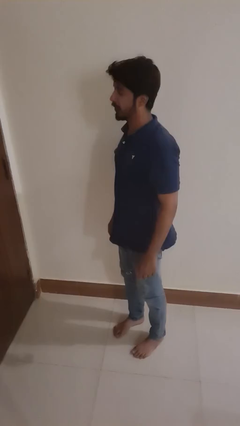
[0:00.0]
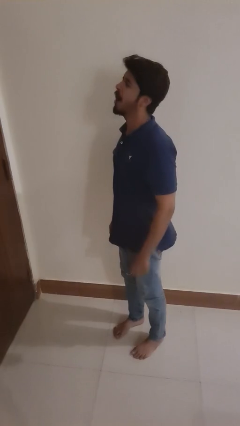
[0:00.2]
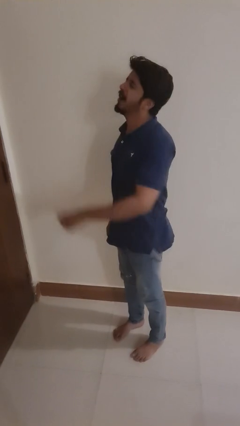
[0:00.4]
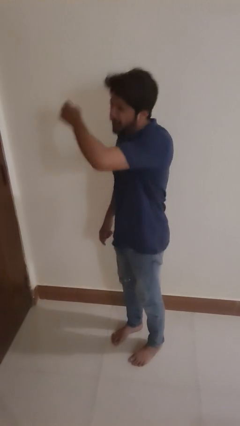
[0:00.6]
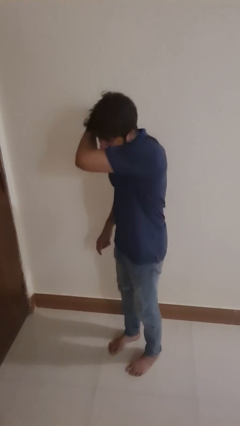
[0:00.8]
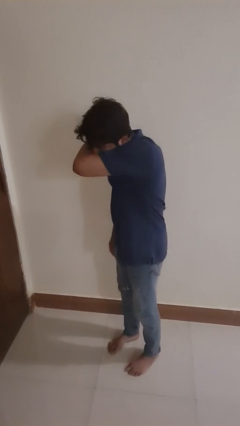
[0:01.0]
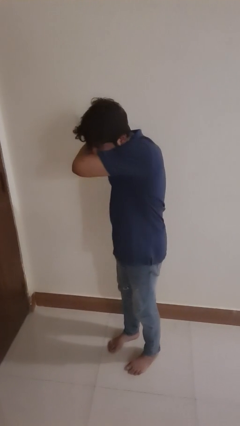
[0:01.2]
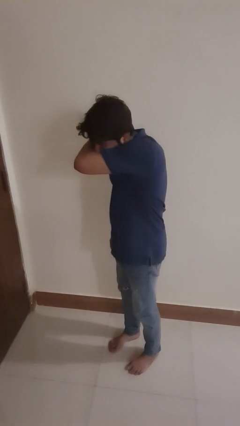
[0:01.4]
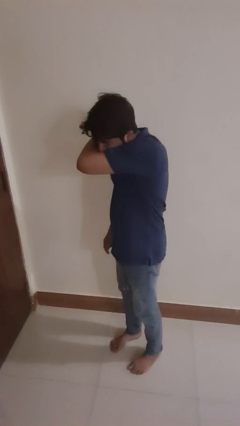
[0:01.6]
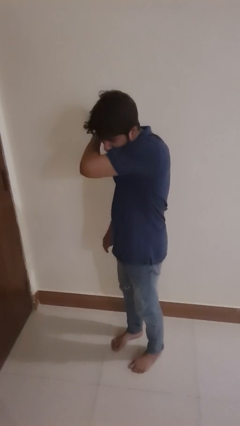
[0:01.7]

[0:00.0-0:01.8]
person sneezes into arm

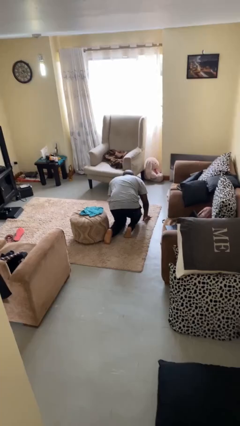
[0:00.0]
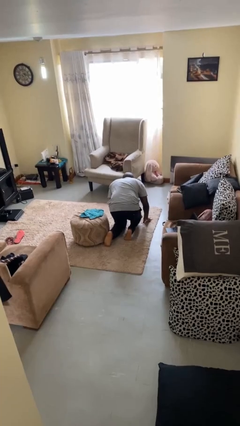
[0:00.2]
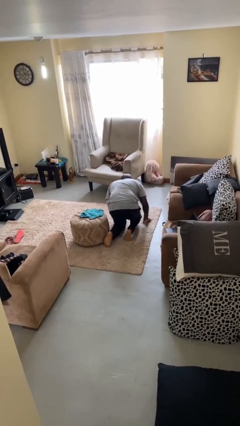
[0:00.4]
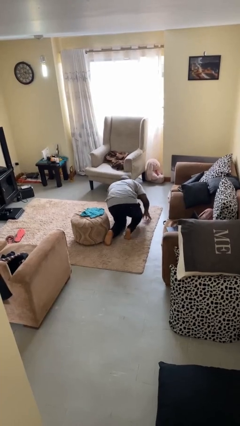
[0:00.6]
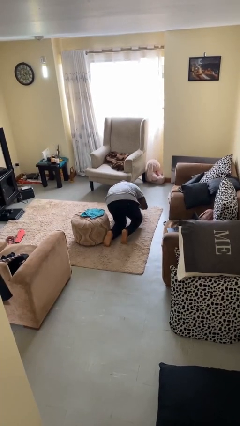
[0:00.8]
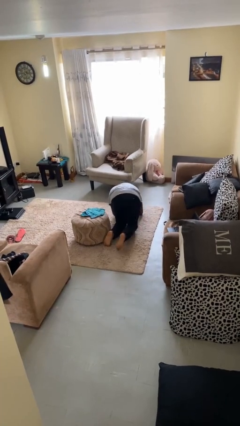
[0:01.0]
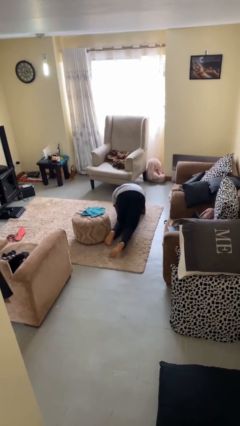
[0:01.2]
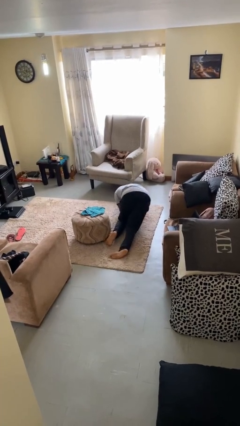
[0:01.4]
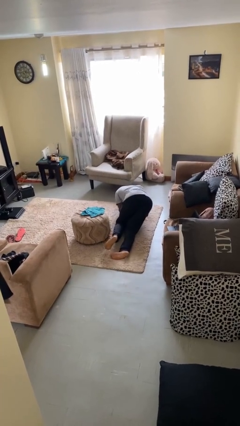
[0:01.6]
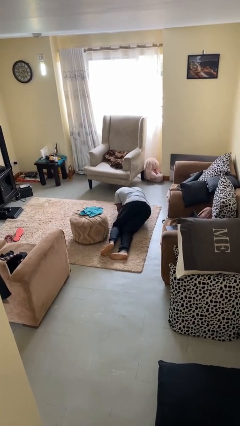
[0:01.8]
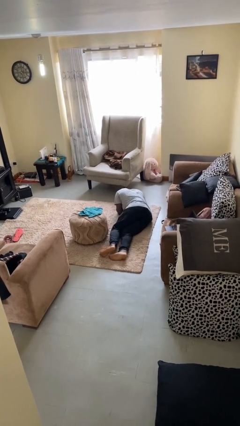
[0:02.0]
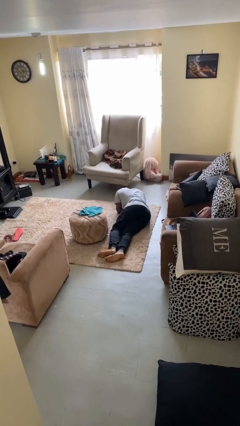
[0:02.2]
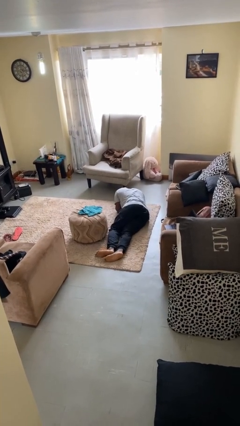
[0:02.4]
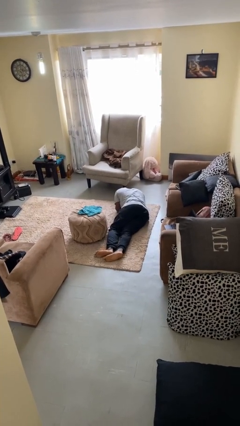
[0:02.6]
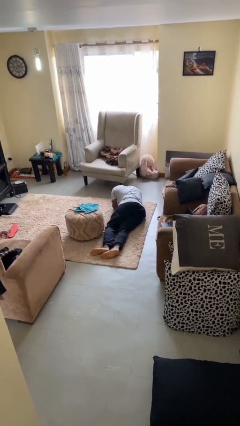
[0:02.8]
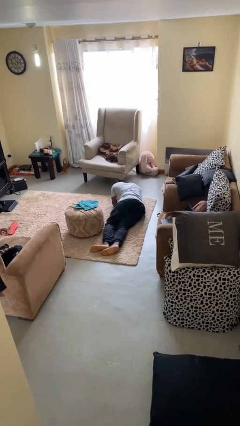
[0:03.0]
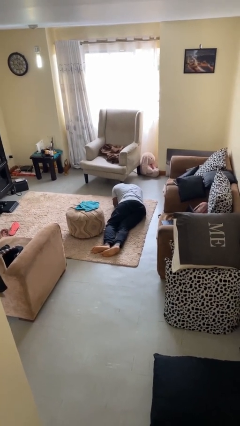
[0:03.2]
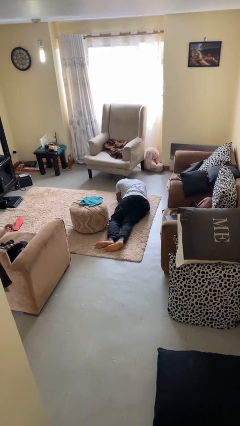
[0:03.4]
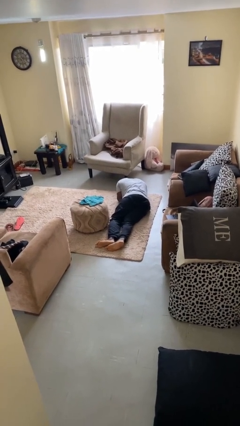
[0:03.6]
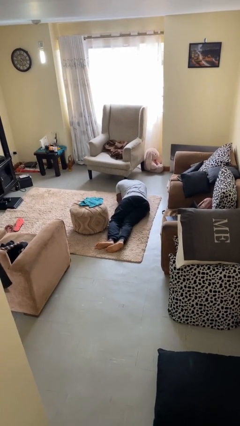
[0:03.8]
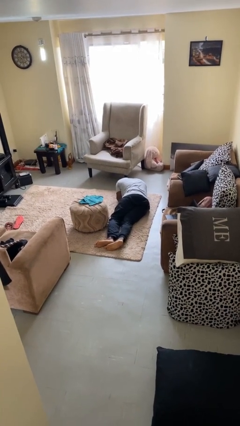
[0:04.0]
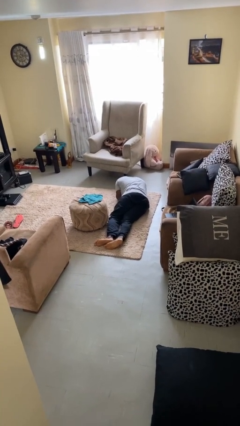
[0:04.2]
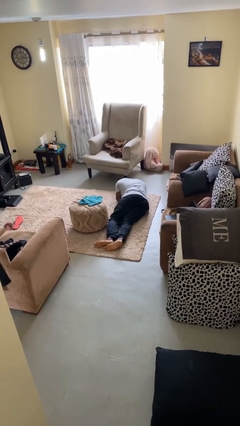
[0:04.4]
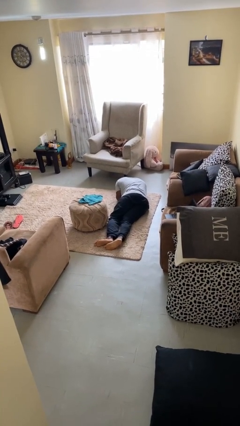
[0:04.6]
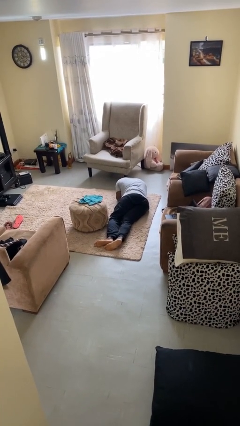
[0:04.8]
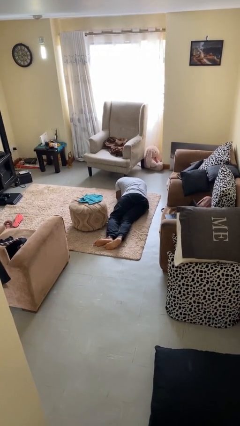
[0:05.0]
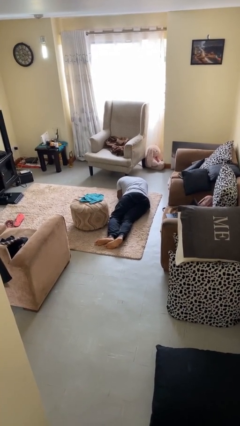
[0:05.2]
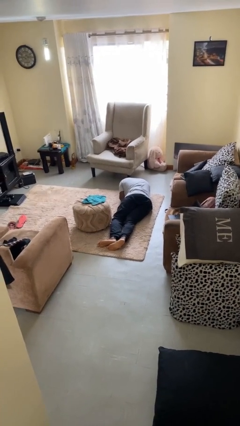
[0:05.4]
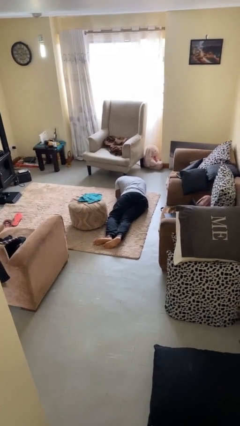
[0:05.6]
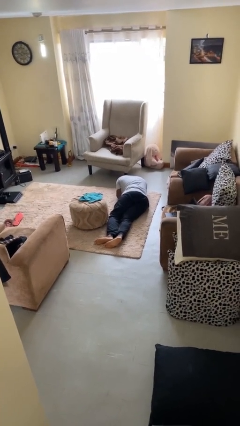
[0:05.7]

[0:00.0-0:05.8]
person lies down on floor

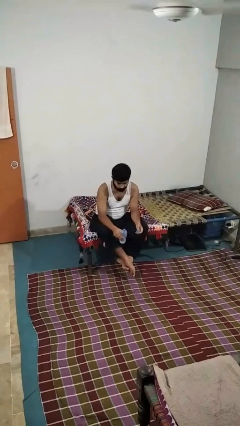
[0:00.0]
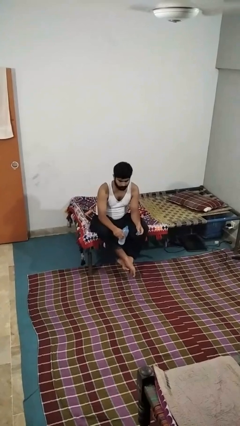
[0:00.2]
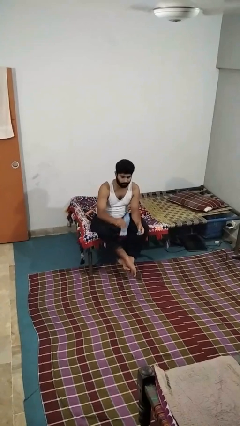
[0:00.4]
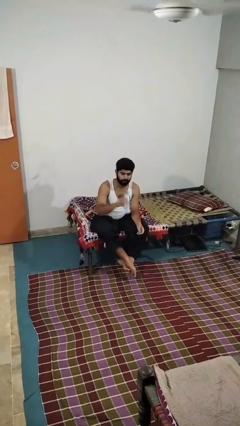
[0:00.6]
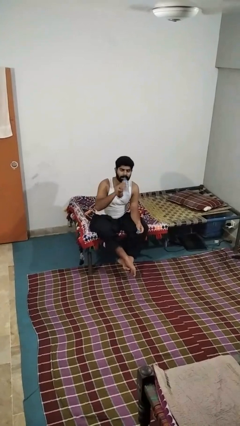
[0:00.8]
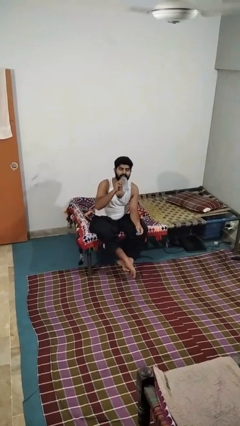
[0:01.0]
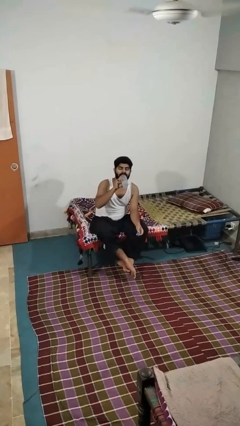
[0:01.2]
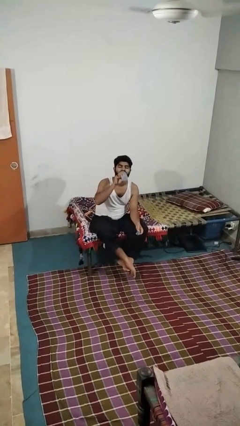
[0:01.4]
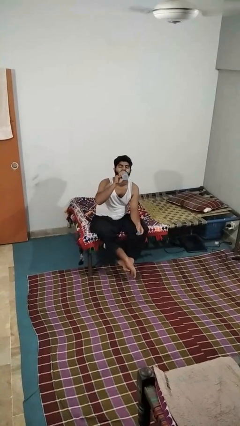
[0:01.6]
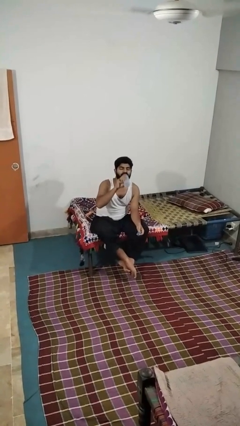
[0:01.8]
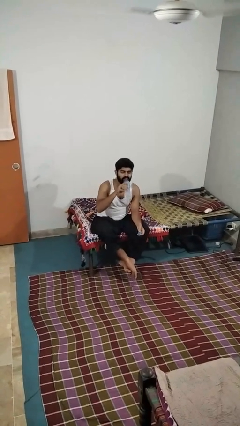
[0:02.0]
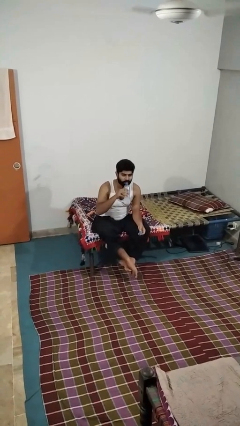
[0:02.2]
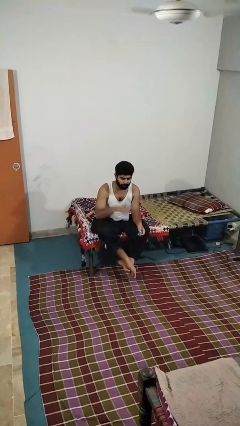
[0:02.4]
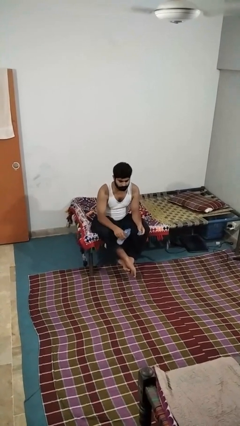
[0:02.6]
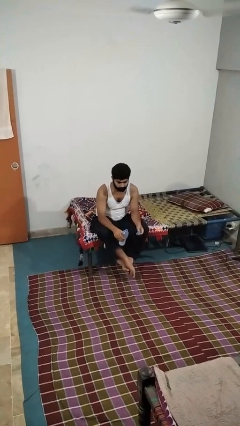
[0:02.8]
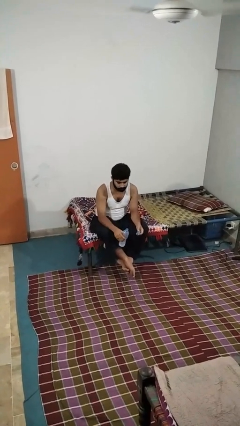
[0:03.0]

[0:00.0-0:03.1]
person drinks from bottle

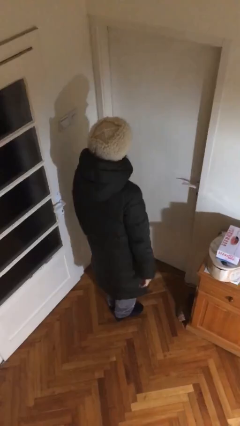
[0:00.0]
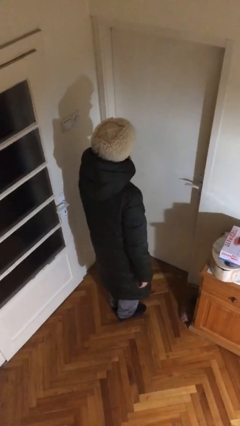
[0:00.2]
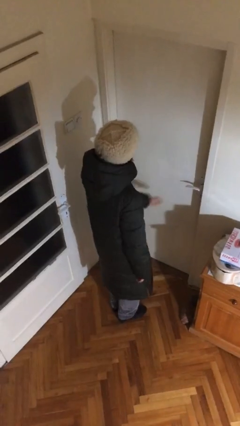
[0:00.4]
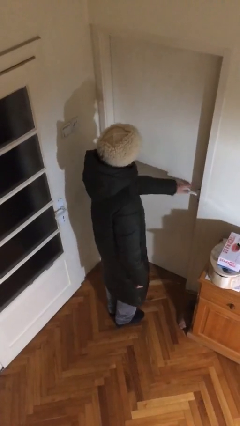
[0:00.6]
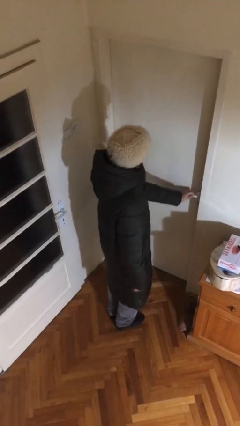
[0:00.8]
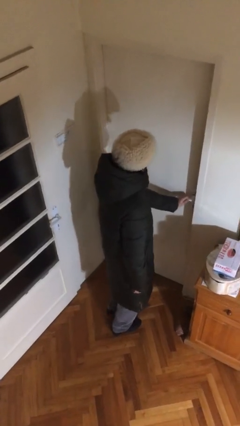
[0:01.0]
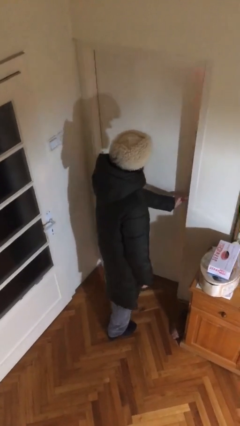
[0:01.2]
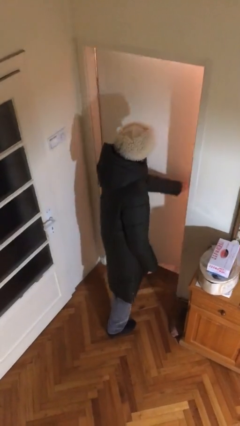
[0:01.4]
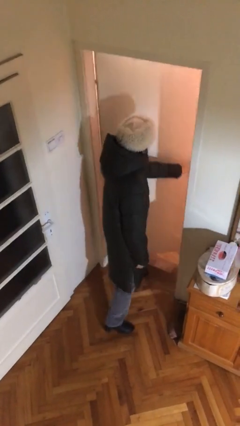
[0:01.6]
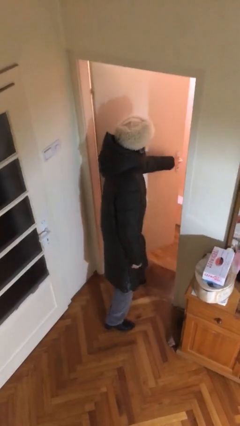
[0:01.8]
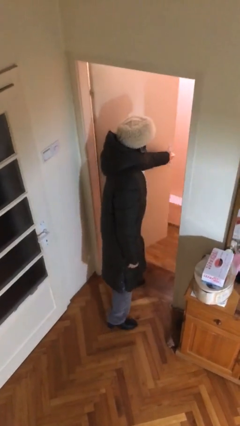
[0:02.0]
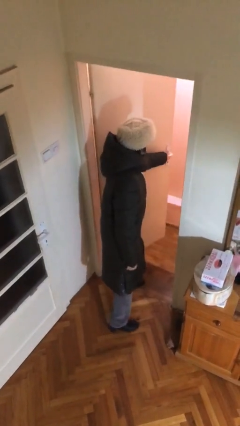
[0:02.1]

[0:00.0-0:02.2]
person opens facility door

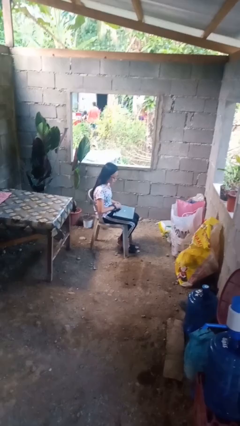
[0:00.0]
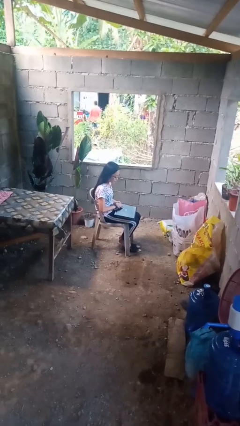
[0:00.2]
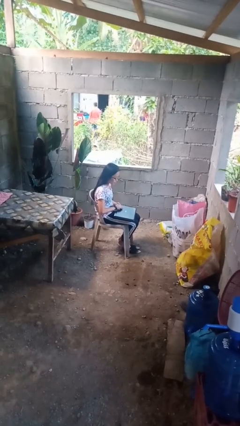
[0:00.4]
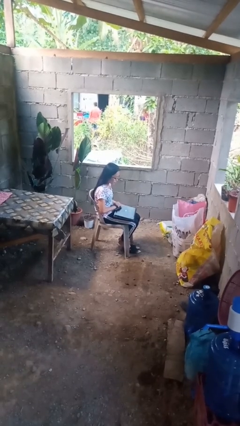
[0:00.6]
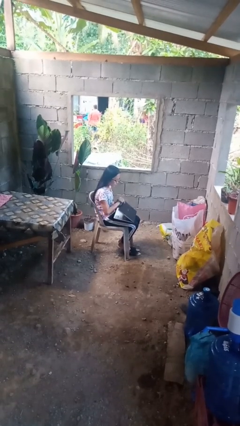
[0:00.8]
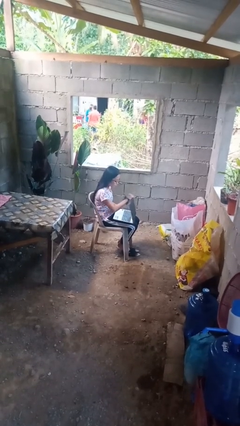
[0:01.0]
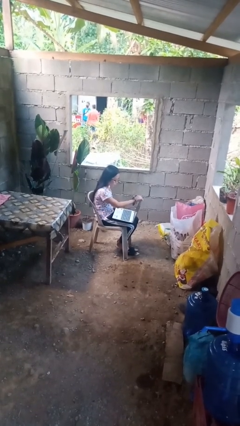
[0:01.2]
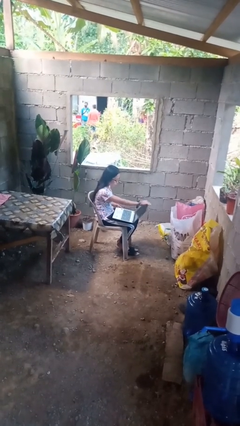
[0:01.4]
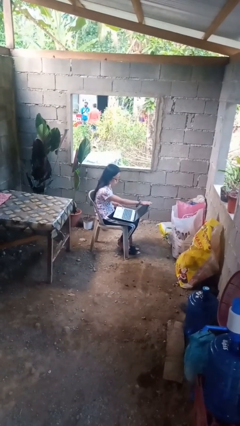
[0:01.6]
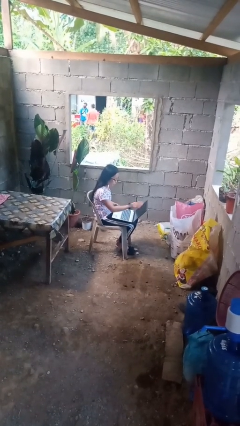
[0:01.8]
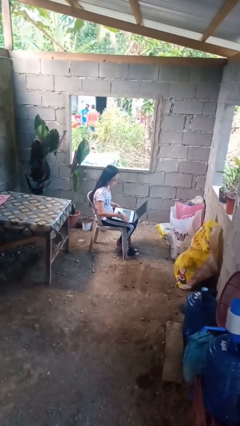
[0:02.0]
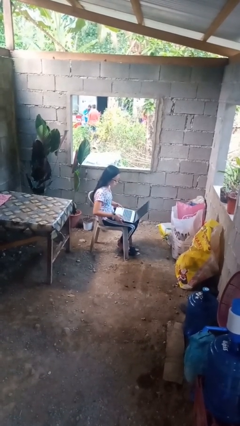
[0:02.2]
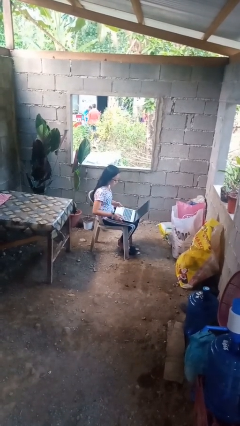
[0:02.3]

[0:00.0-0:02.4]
person opens laptop

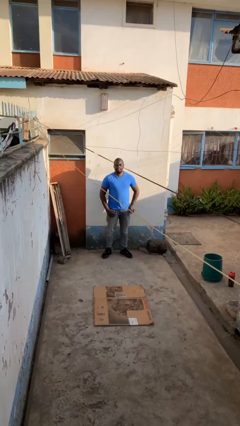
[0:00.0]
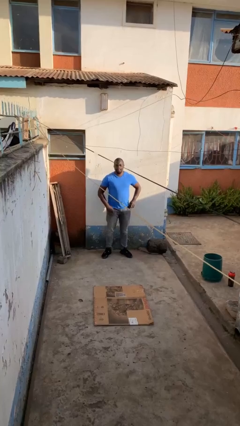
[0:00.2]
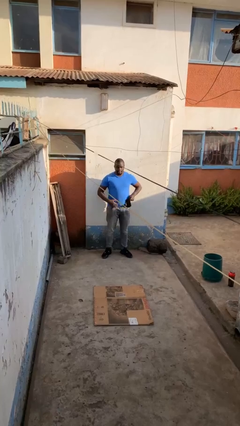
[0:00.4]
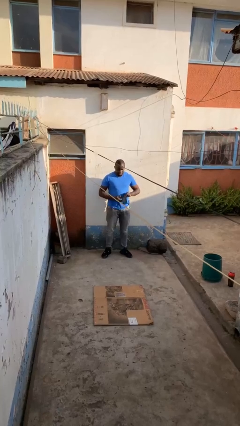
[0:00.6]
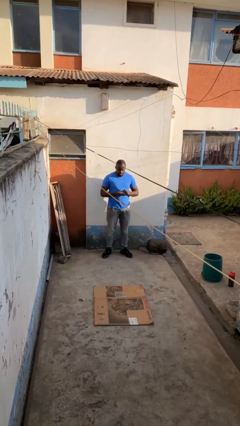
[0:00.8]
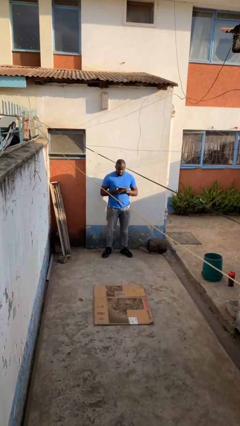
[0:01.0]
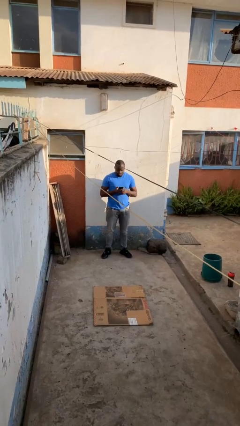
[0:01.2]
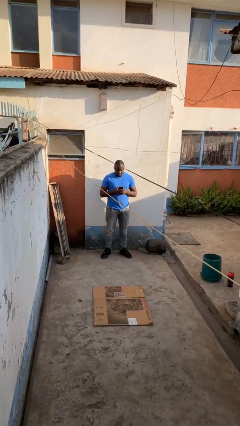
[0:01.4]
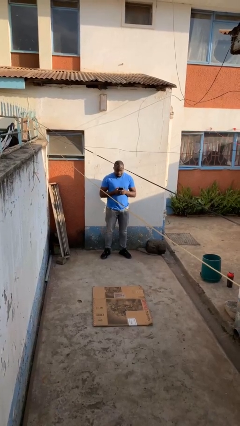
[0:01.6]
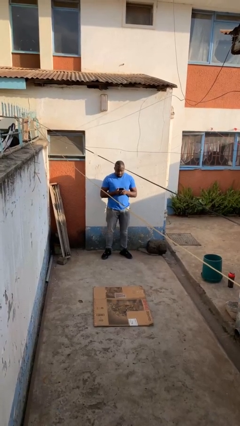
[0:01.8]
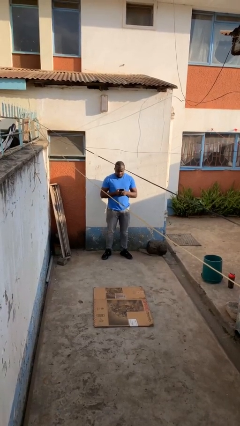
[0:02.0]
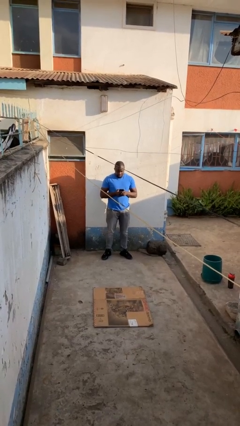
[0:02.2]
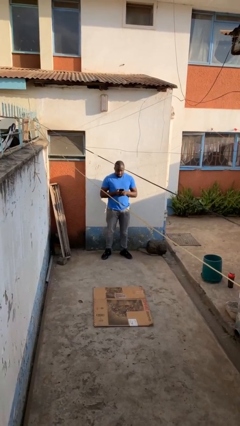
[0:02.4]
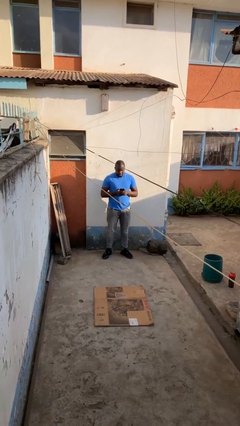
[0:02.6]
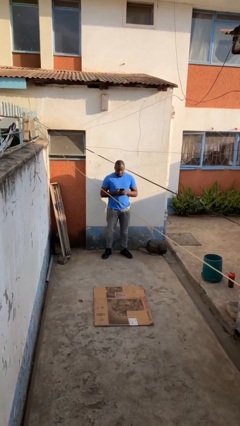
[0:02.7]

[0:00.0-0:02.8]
person takes phone from pocket
